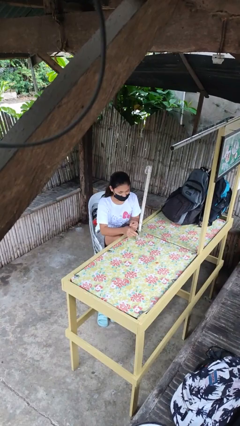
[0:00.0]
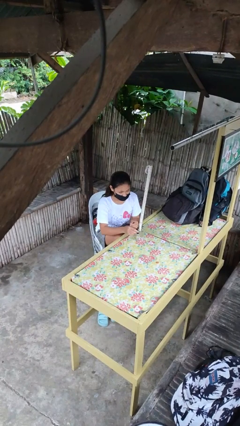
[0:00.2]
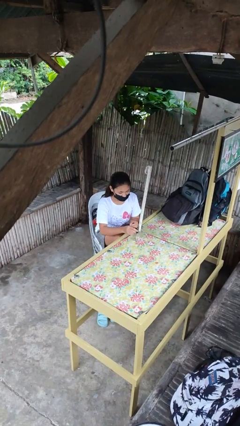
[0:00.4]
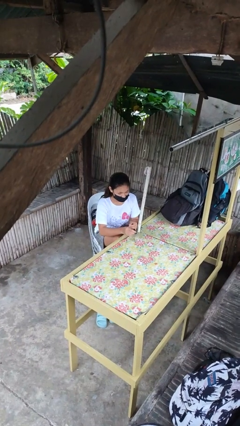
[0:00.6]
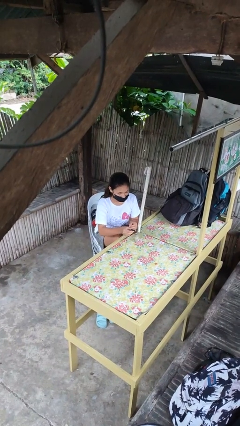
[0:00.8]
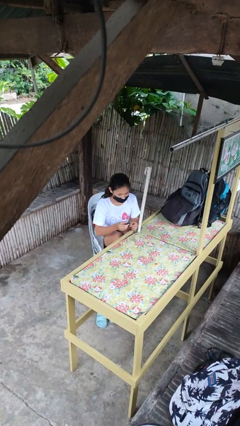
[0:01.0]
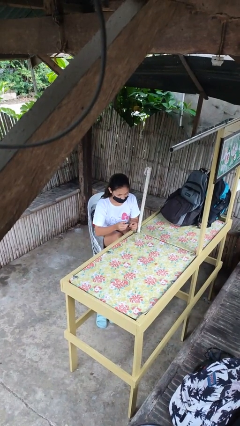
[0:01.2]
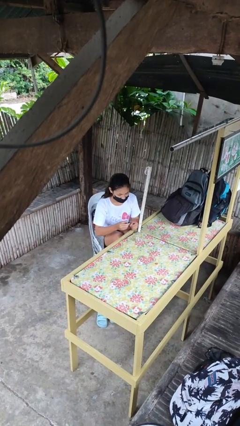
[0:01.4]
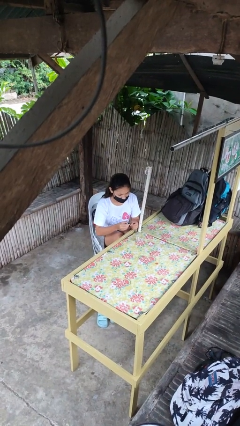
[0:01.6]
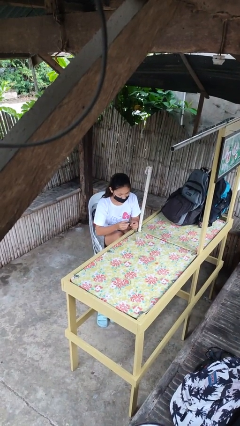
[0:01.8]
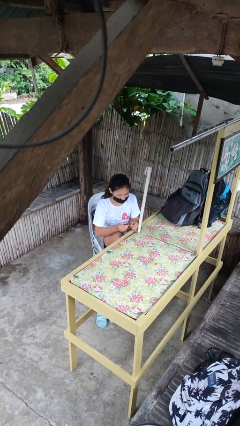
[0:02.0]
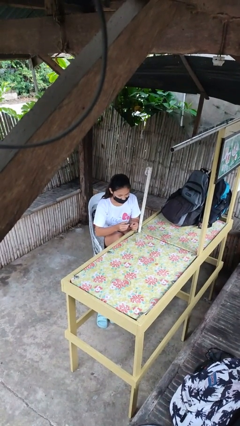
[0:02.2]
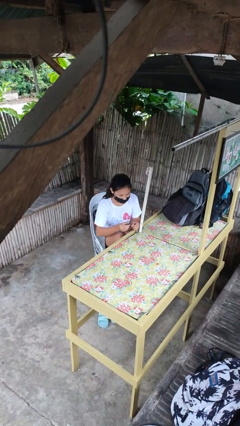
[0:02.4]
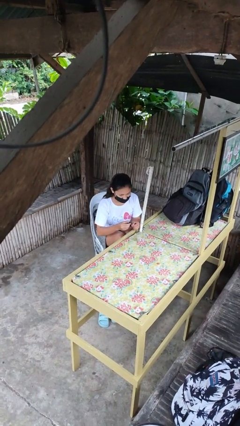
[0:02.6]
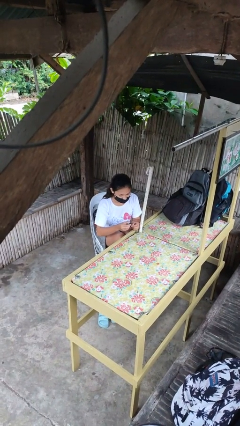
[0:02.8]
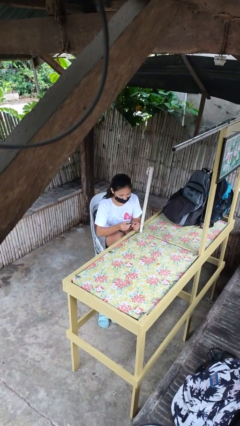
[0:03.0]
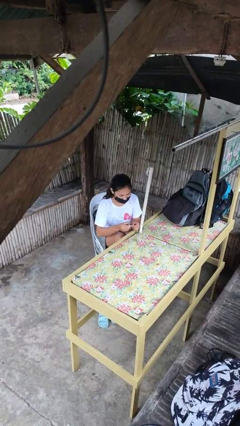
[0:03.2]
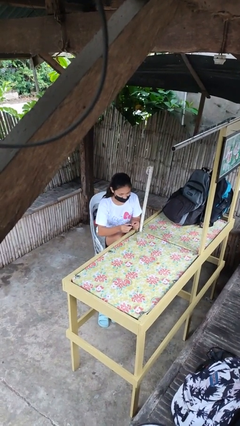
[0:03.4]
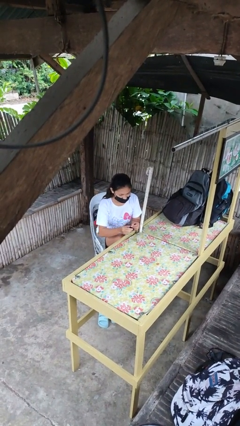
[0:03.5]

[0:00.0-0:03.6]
person paints fingernails

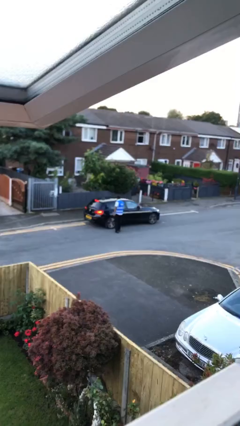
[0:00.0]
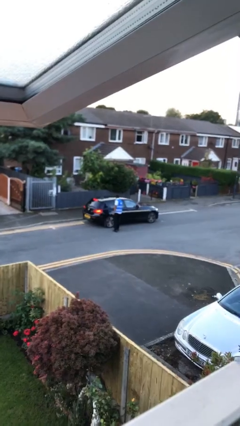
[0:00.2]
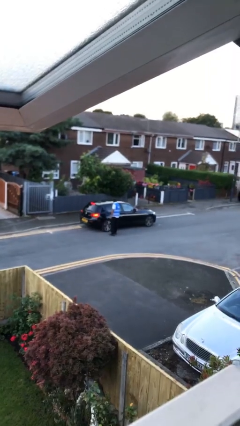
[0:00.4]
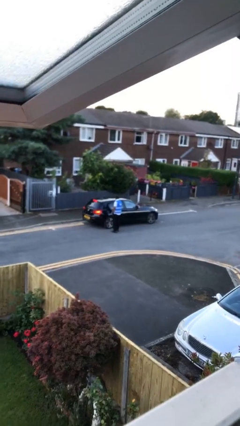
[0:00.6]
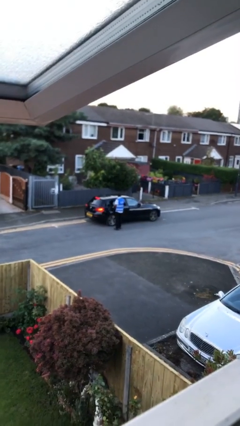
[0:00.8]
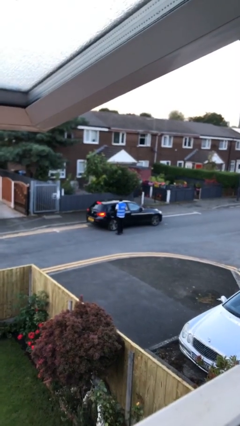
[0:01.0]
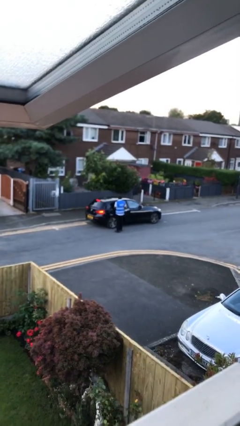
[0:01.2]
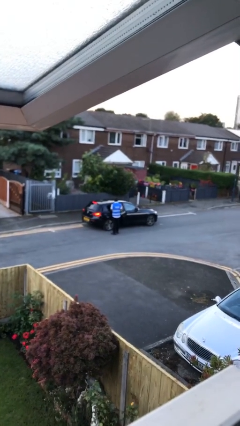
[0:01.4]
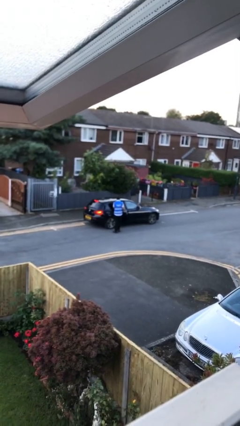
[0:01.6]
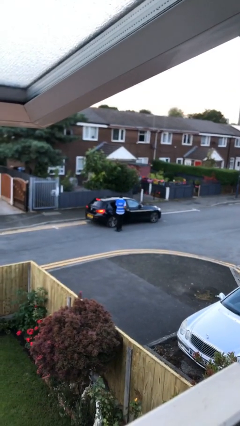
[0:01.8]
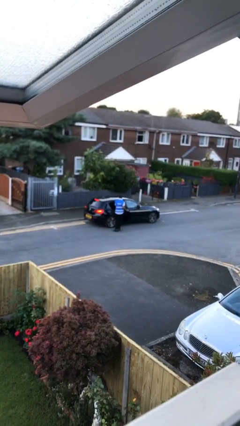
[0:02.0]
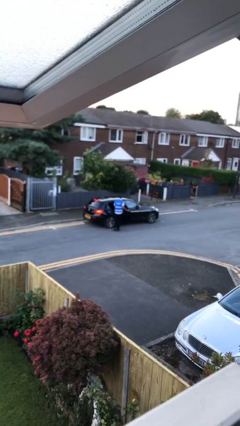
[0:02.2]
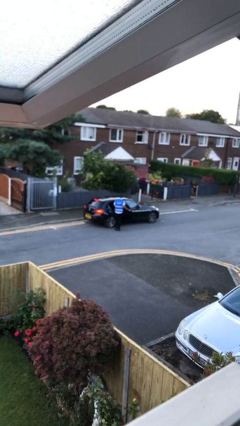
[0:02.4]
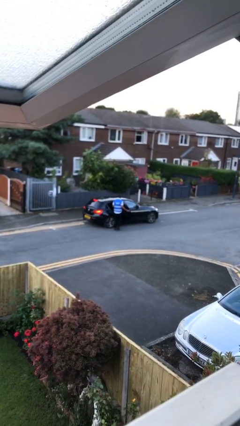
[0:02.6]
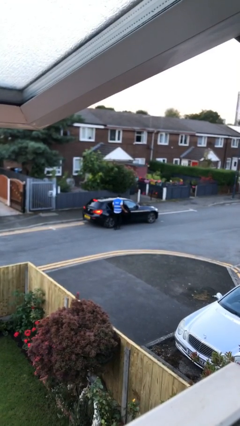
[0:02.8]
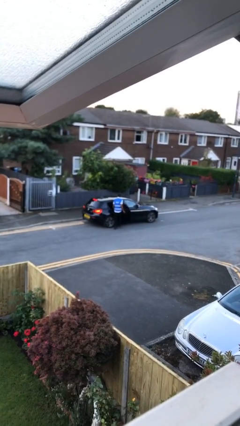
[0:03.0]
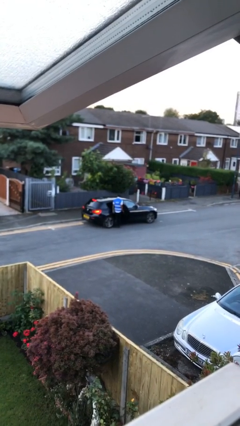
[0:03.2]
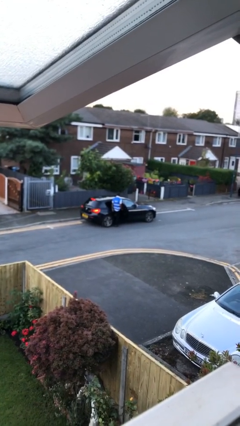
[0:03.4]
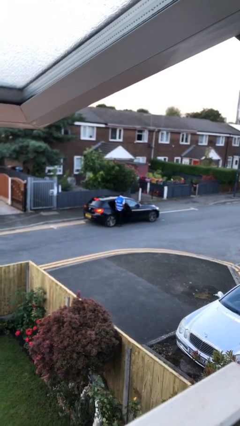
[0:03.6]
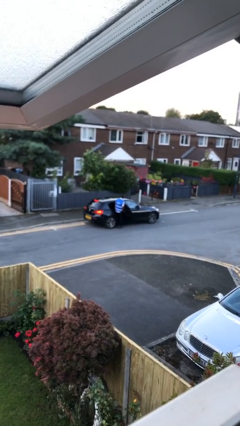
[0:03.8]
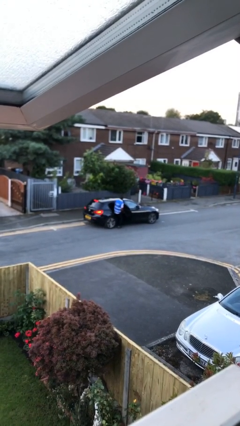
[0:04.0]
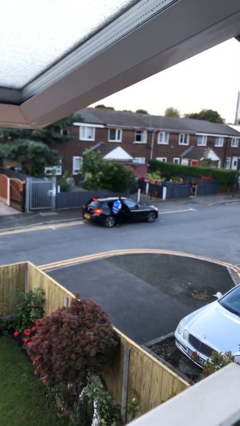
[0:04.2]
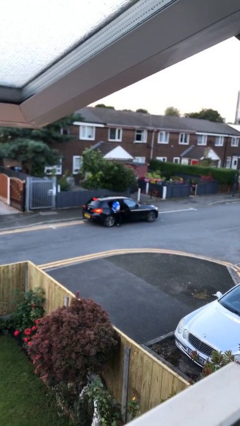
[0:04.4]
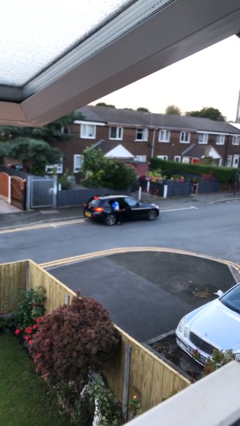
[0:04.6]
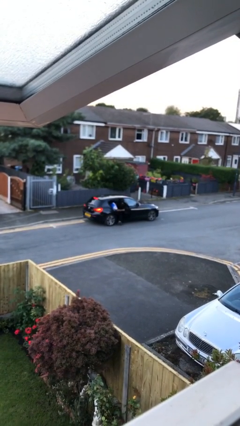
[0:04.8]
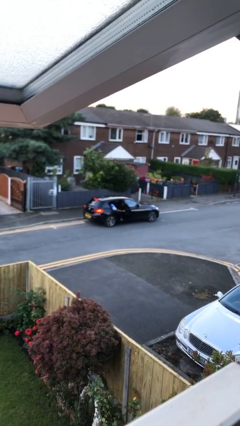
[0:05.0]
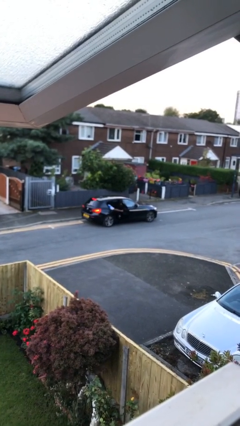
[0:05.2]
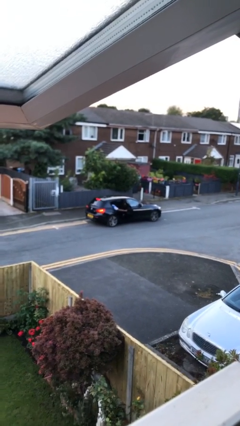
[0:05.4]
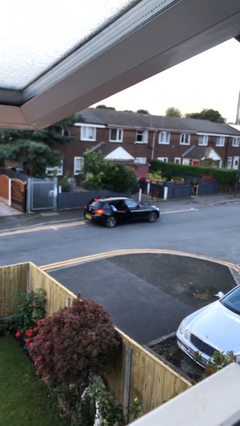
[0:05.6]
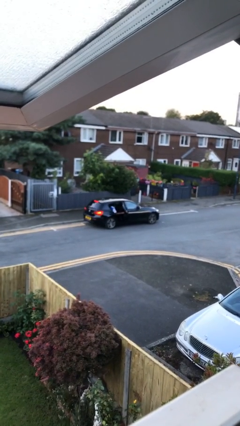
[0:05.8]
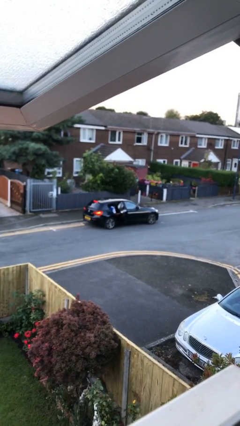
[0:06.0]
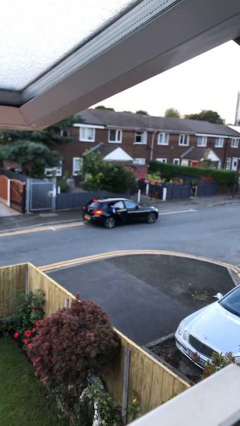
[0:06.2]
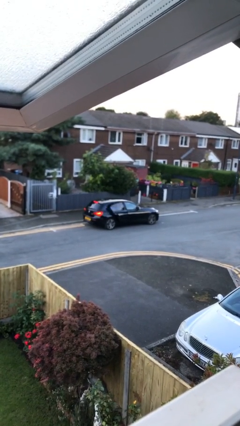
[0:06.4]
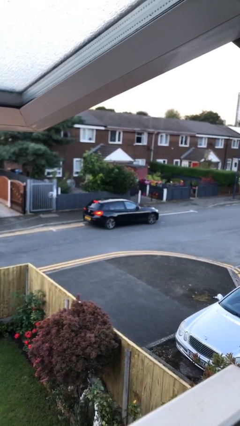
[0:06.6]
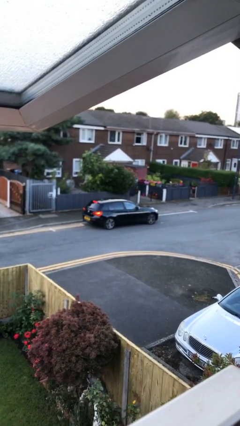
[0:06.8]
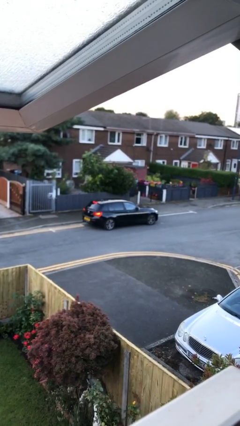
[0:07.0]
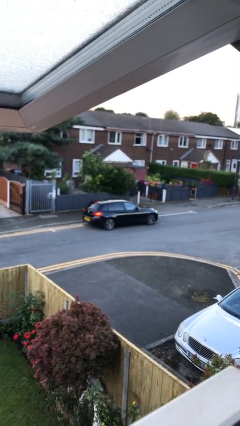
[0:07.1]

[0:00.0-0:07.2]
car picks up person

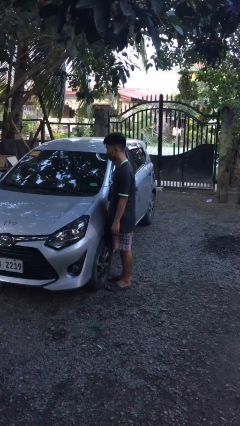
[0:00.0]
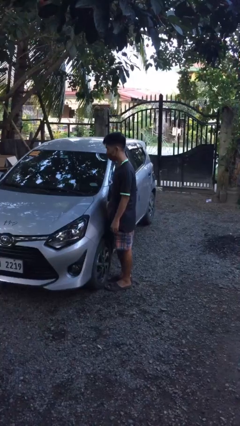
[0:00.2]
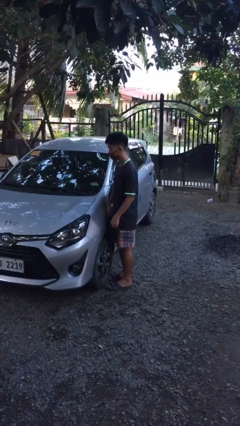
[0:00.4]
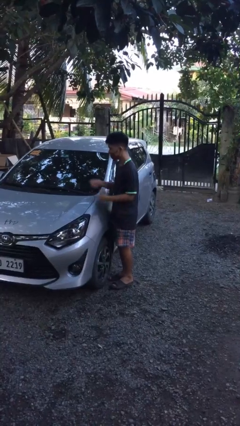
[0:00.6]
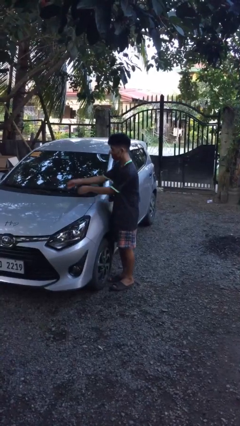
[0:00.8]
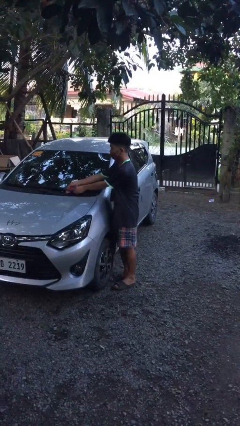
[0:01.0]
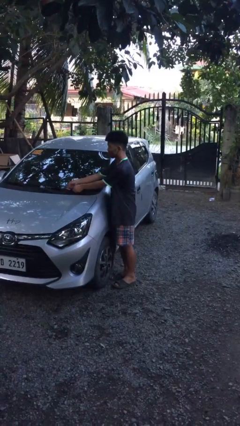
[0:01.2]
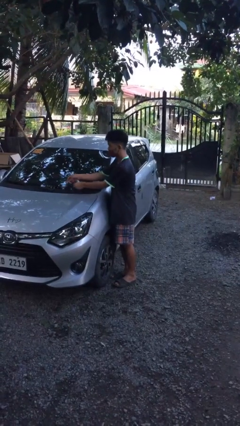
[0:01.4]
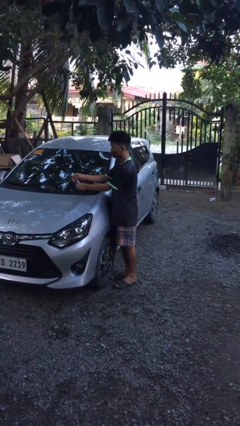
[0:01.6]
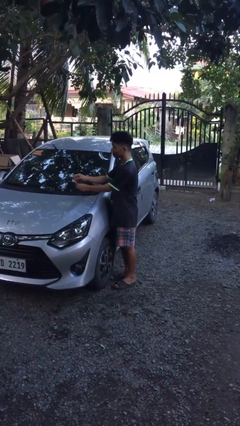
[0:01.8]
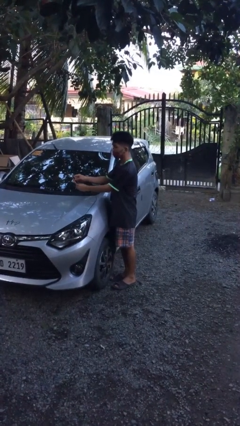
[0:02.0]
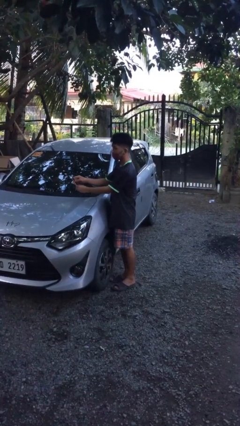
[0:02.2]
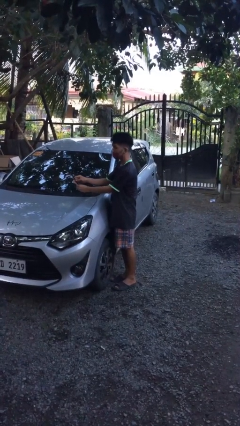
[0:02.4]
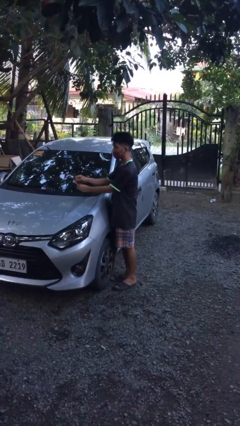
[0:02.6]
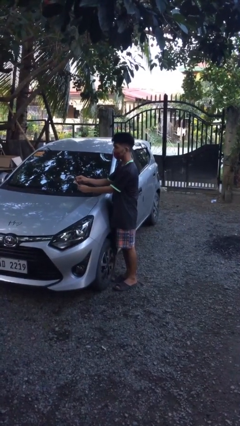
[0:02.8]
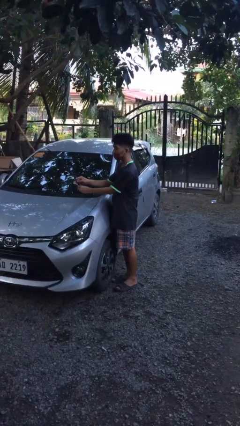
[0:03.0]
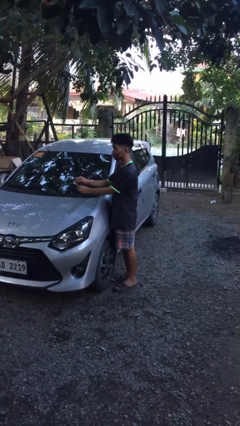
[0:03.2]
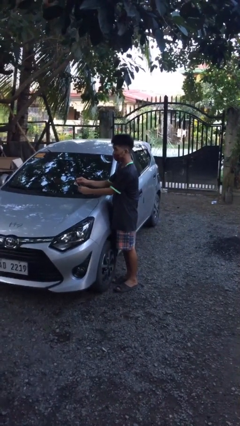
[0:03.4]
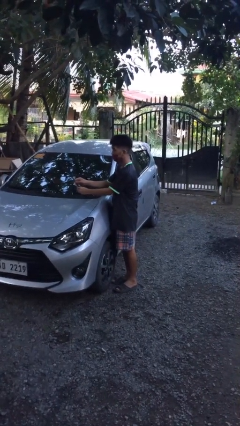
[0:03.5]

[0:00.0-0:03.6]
person flips up car wipers

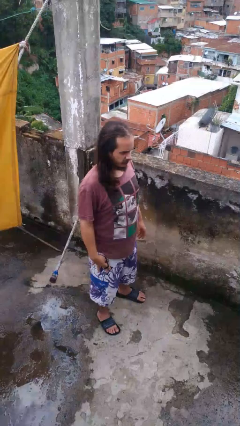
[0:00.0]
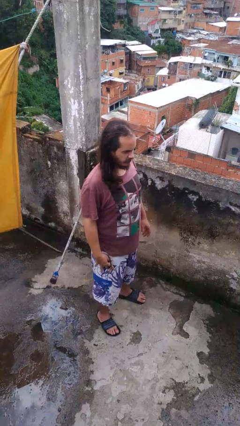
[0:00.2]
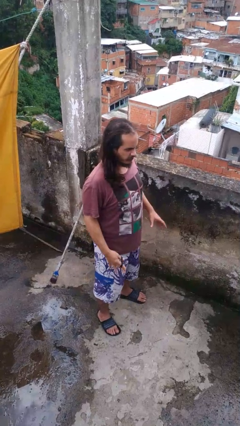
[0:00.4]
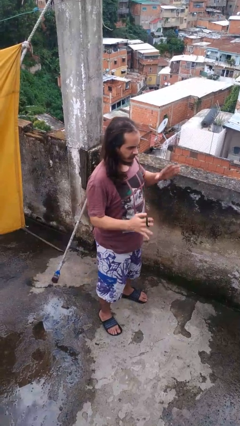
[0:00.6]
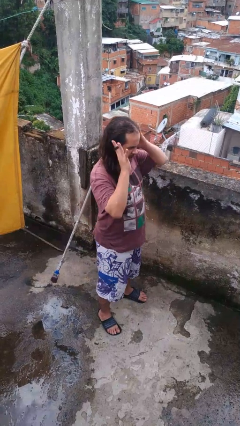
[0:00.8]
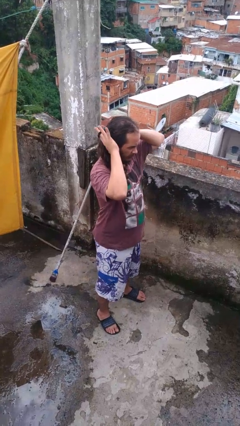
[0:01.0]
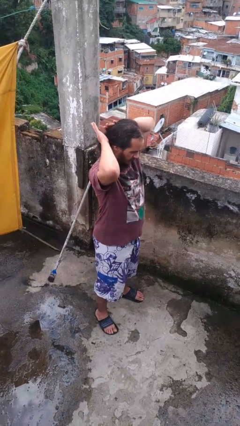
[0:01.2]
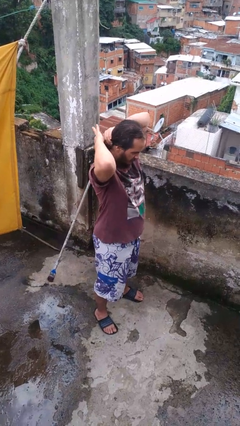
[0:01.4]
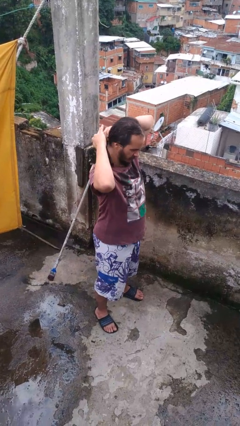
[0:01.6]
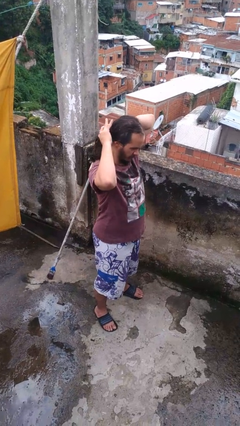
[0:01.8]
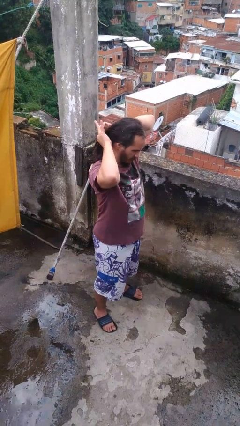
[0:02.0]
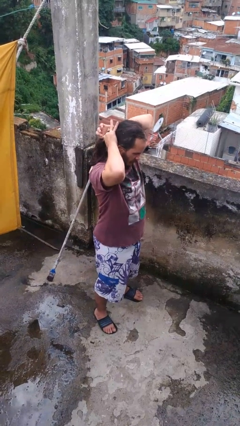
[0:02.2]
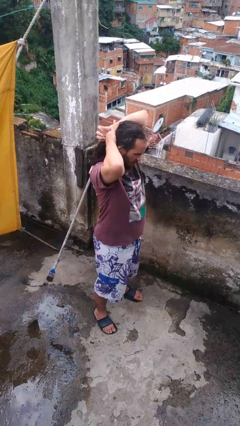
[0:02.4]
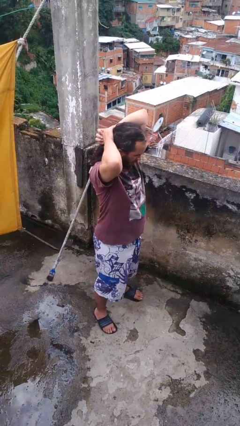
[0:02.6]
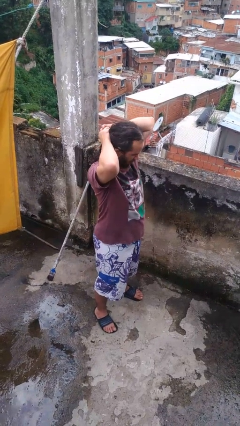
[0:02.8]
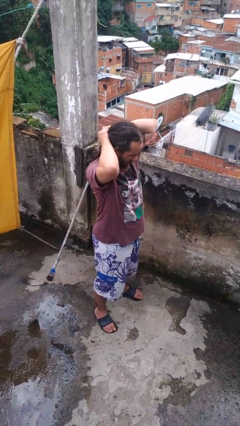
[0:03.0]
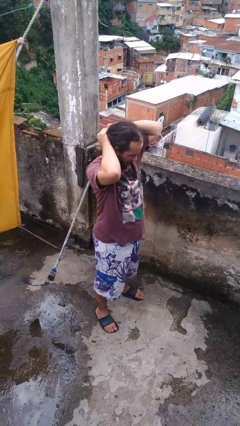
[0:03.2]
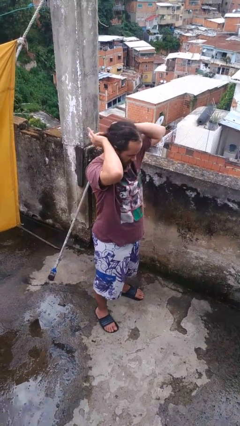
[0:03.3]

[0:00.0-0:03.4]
person puts hair in ponytail
